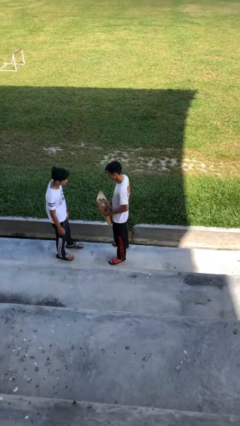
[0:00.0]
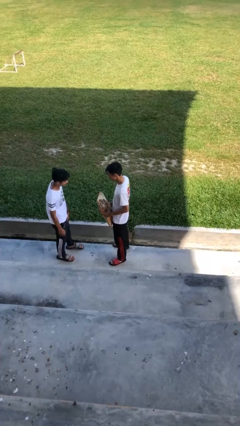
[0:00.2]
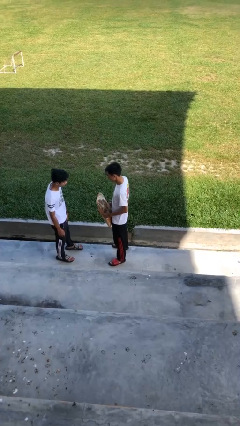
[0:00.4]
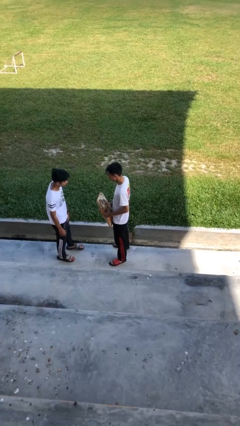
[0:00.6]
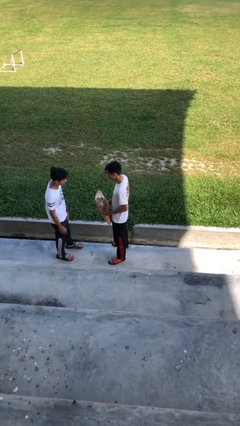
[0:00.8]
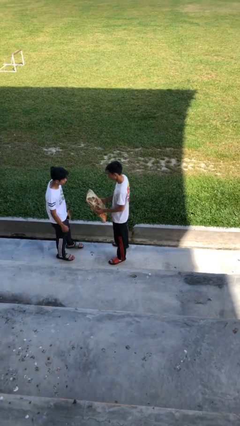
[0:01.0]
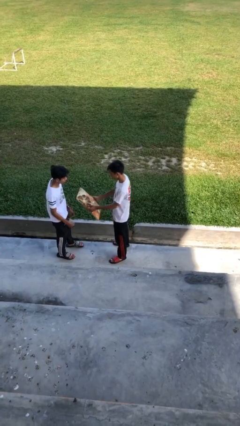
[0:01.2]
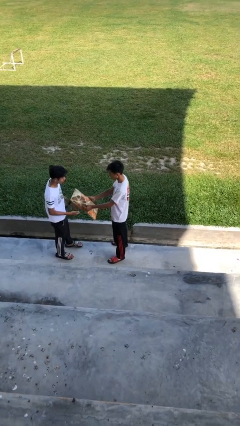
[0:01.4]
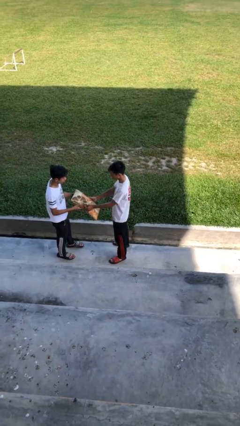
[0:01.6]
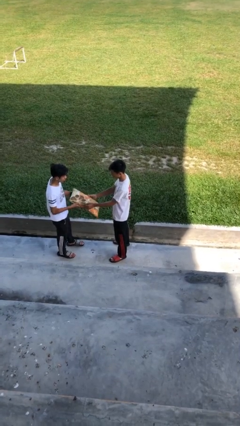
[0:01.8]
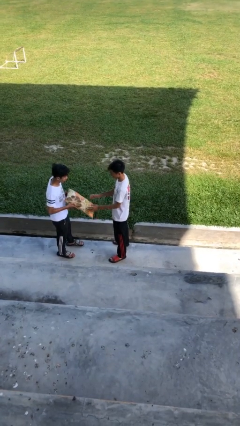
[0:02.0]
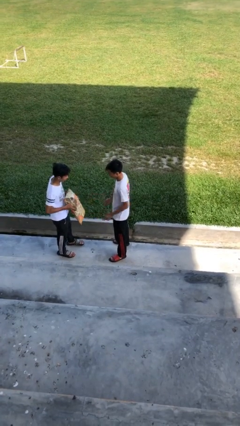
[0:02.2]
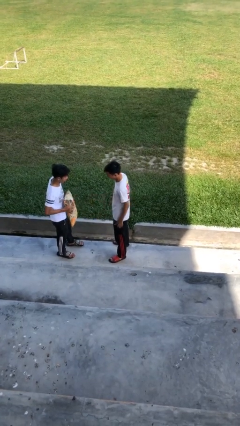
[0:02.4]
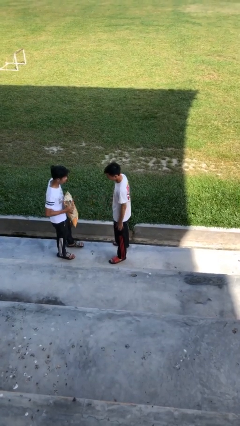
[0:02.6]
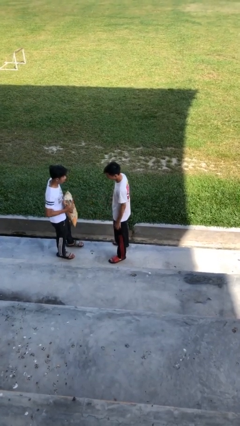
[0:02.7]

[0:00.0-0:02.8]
person transfers object to person

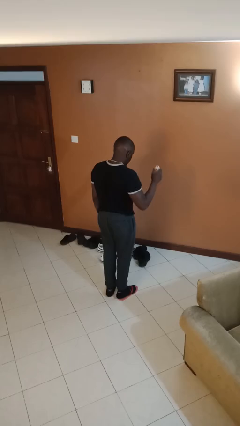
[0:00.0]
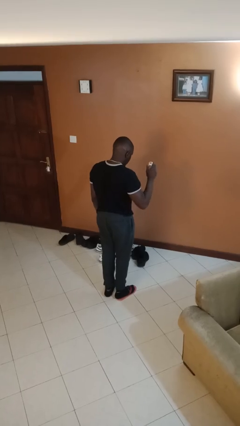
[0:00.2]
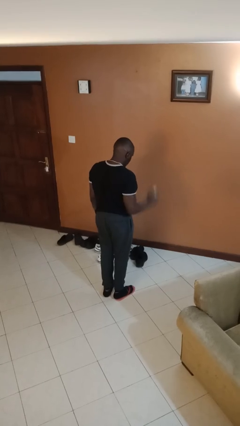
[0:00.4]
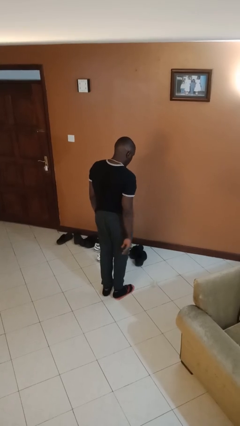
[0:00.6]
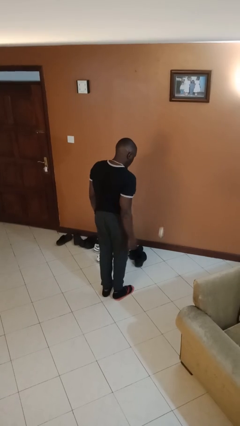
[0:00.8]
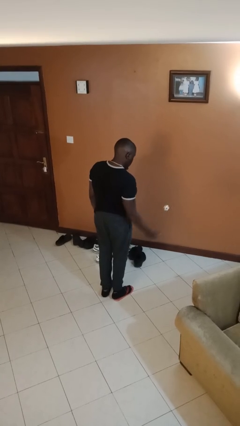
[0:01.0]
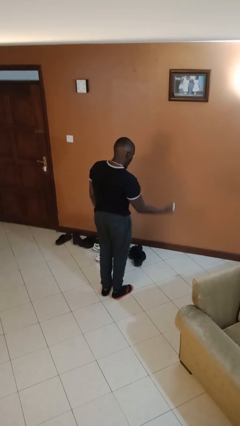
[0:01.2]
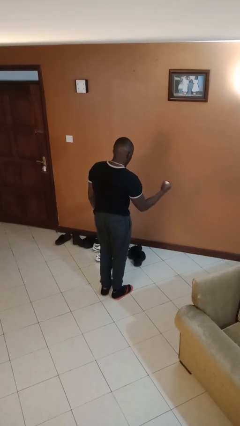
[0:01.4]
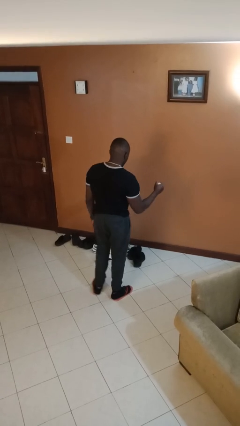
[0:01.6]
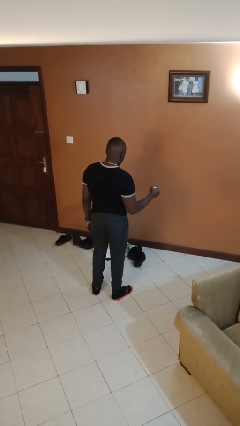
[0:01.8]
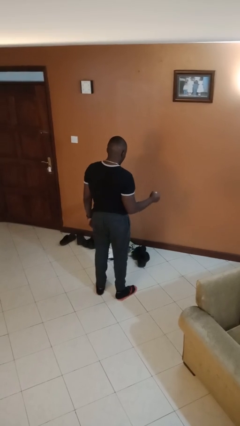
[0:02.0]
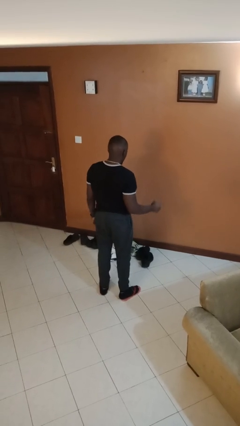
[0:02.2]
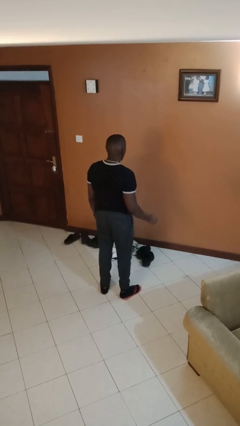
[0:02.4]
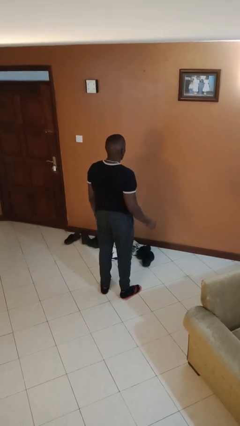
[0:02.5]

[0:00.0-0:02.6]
person bounces ball on floor

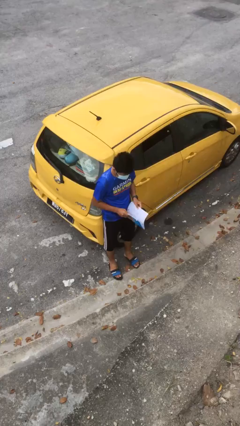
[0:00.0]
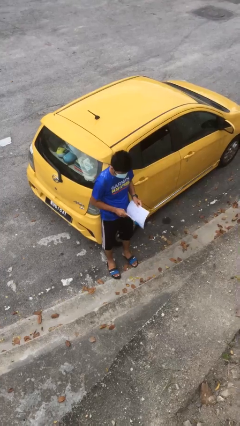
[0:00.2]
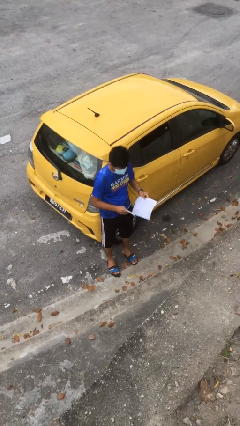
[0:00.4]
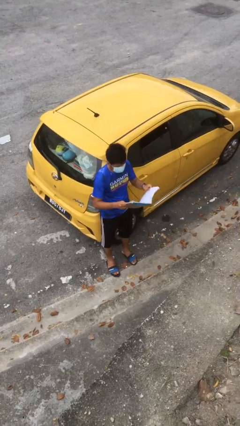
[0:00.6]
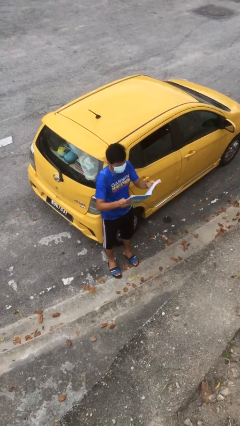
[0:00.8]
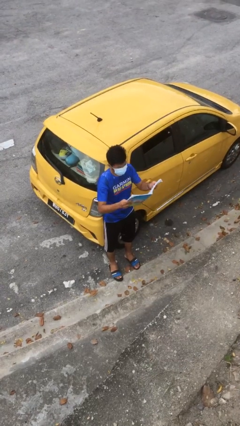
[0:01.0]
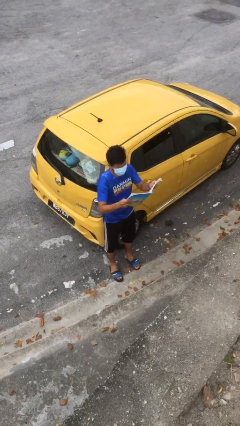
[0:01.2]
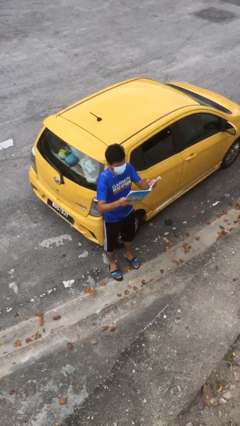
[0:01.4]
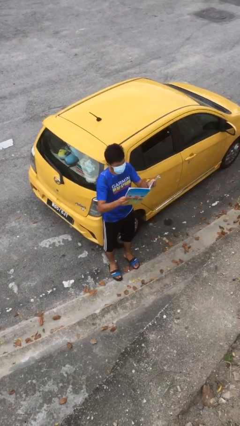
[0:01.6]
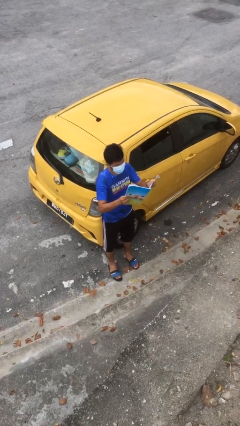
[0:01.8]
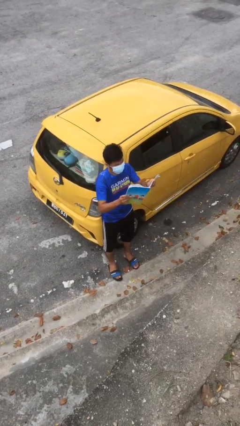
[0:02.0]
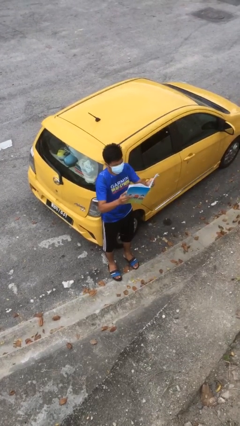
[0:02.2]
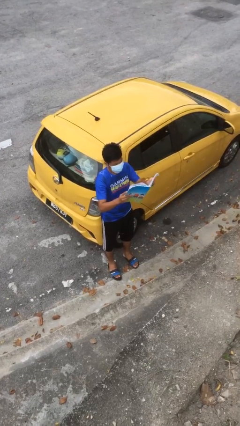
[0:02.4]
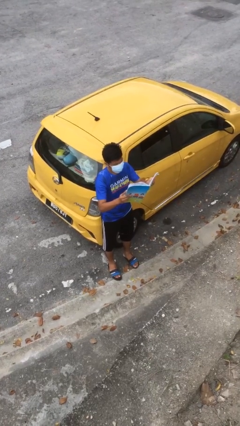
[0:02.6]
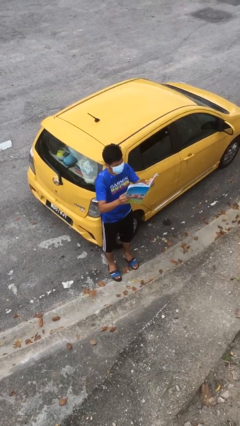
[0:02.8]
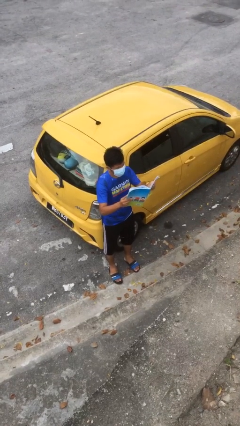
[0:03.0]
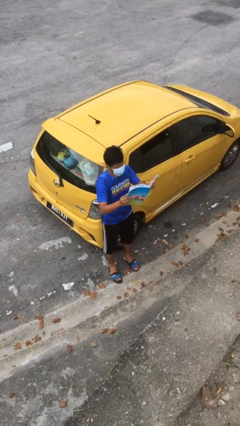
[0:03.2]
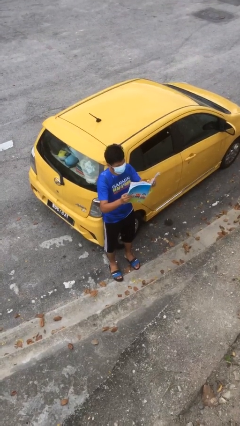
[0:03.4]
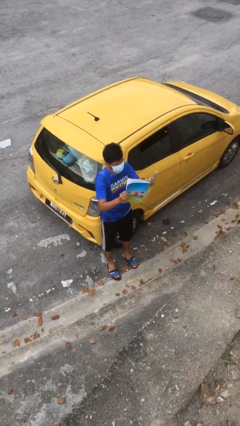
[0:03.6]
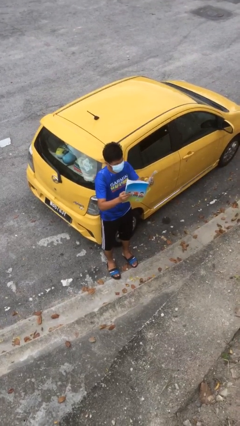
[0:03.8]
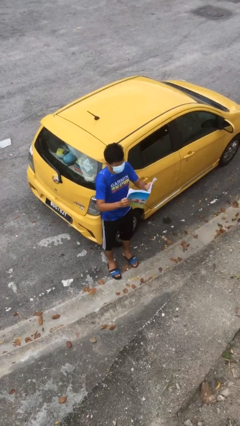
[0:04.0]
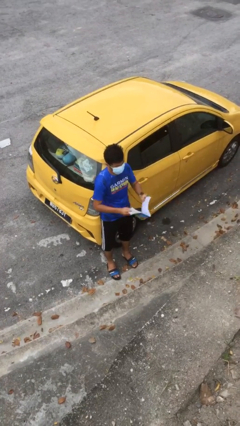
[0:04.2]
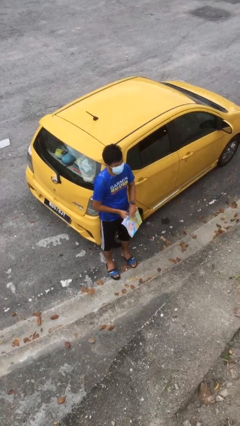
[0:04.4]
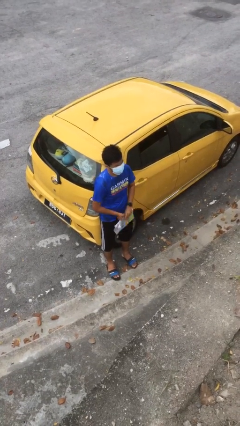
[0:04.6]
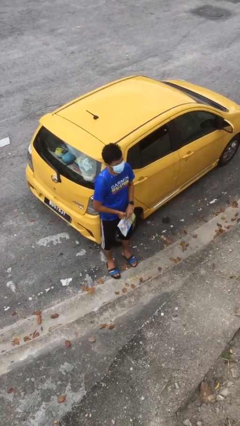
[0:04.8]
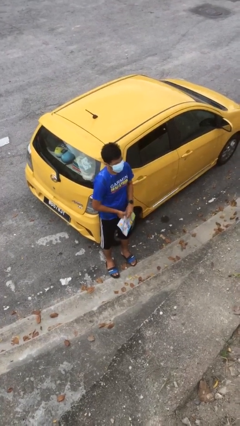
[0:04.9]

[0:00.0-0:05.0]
person reads document

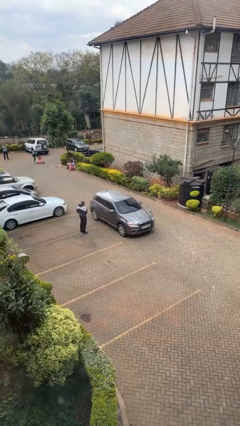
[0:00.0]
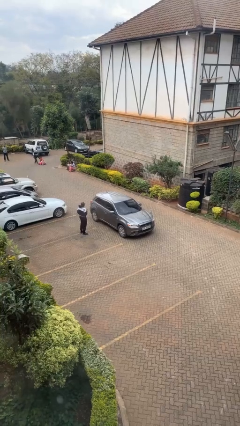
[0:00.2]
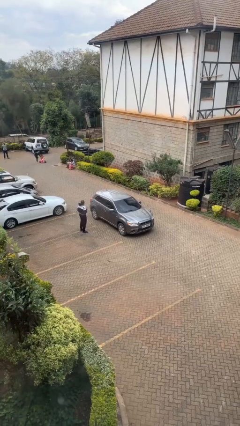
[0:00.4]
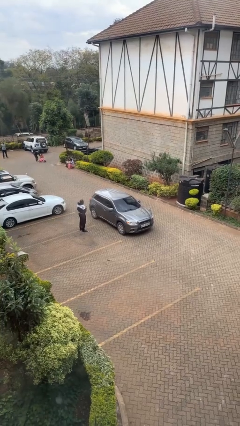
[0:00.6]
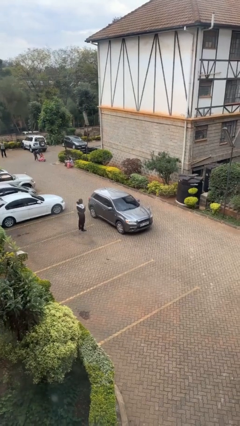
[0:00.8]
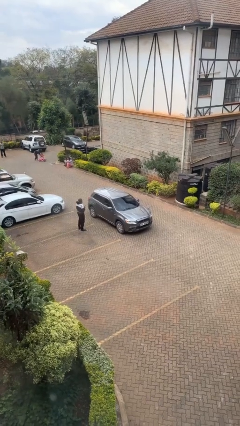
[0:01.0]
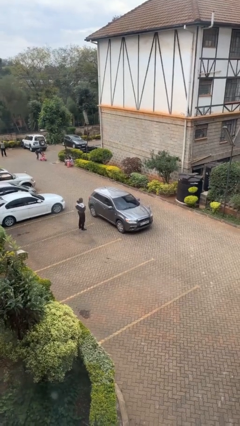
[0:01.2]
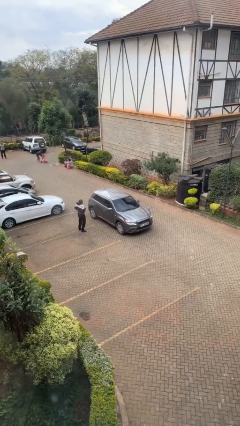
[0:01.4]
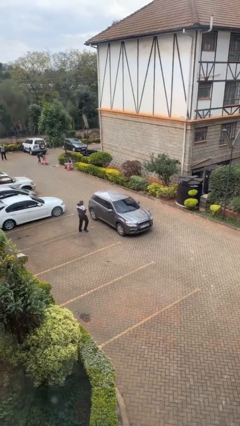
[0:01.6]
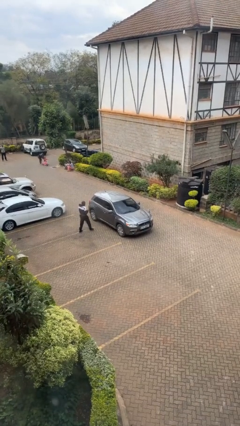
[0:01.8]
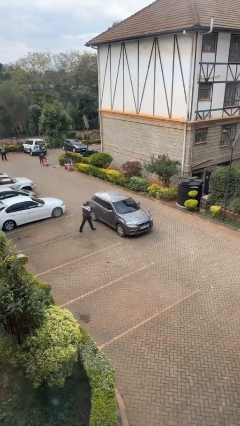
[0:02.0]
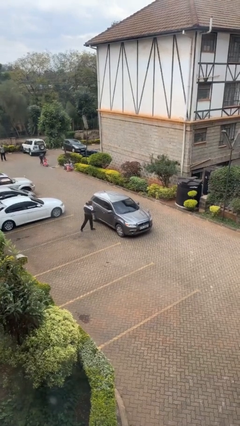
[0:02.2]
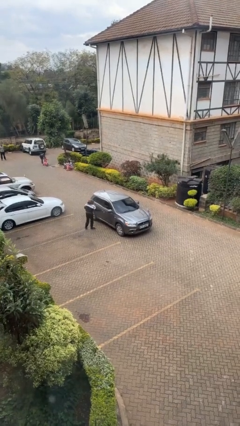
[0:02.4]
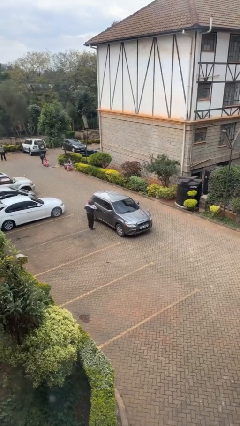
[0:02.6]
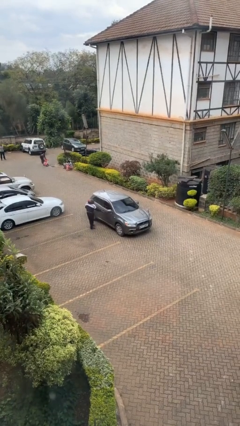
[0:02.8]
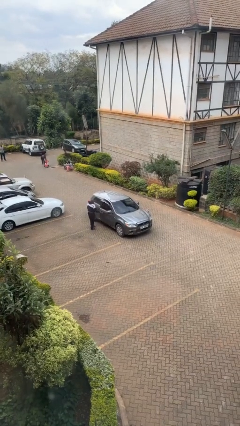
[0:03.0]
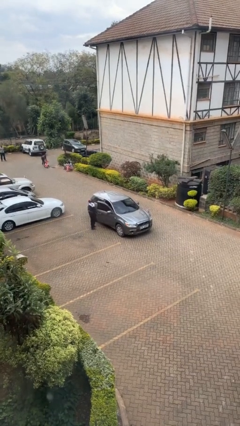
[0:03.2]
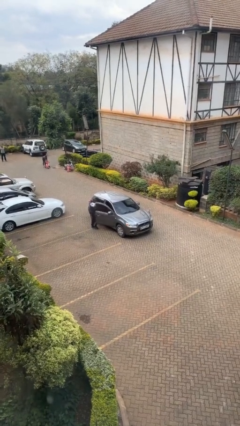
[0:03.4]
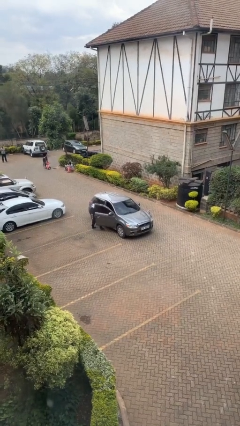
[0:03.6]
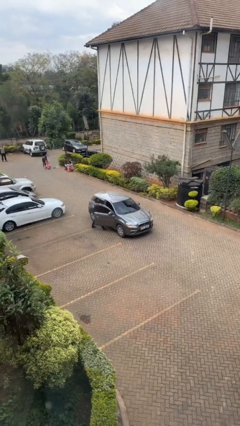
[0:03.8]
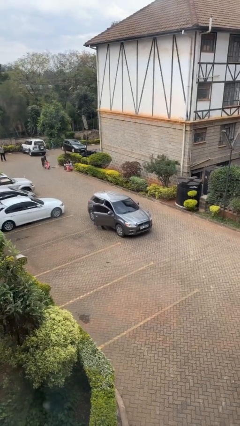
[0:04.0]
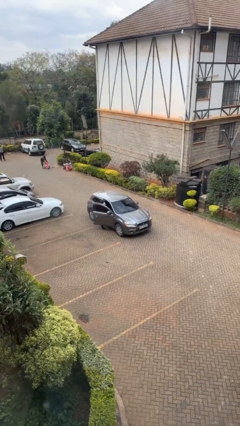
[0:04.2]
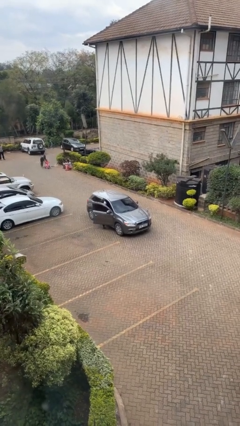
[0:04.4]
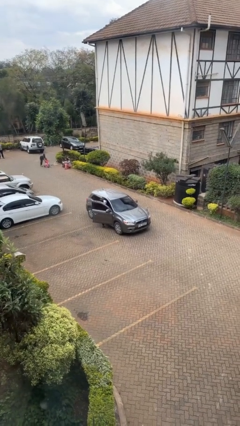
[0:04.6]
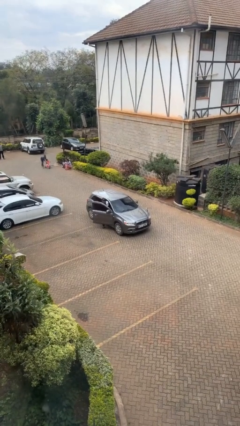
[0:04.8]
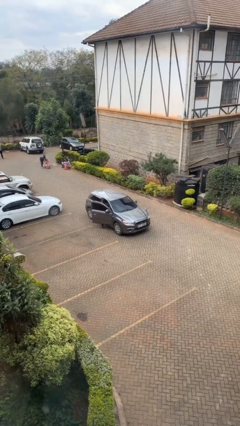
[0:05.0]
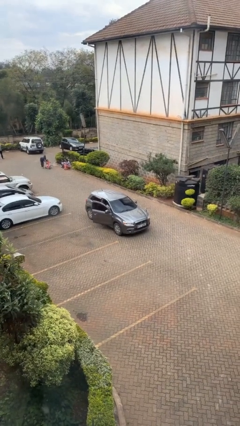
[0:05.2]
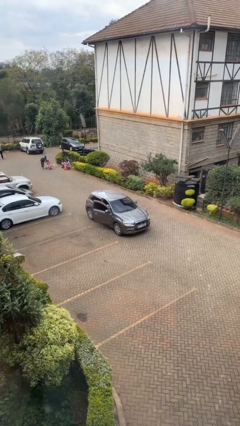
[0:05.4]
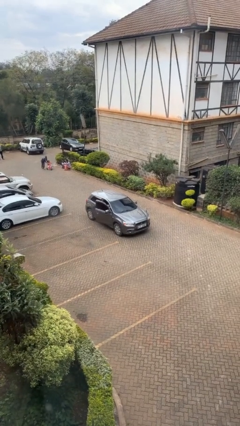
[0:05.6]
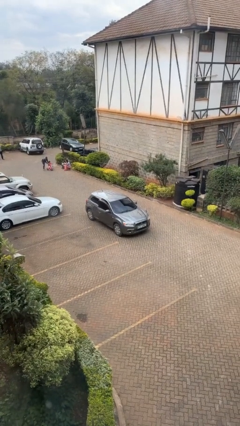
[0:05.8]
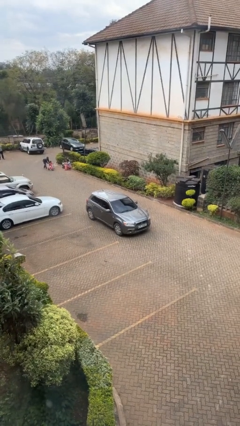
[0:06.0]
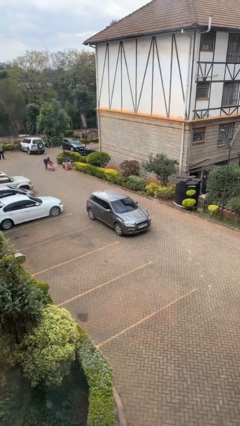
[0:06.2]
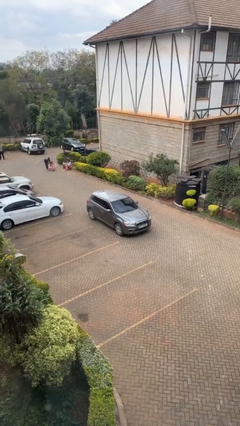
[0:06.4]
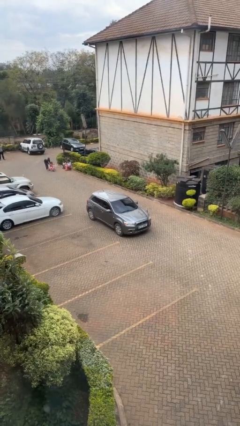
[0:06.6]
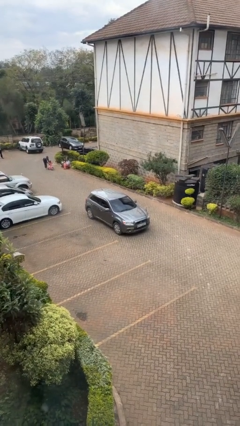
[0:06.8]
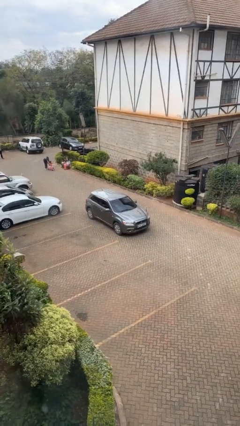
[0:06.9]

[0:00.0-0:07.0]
car picks up person

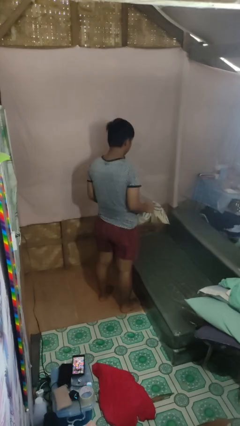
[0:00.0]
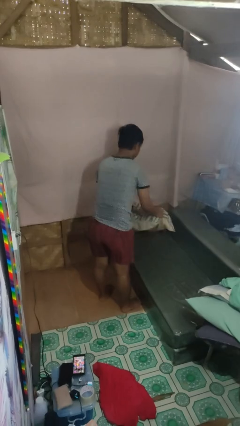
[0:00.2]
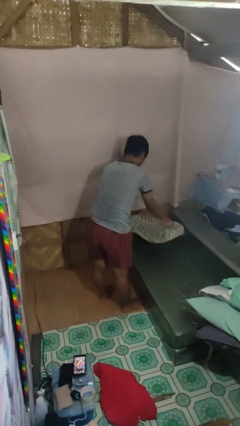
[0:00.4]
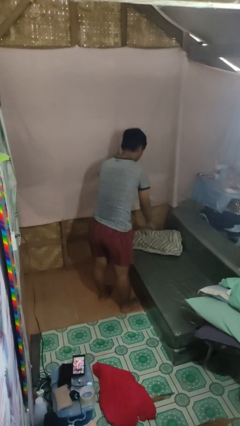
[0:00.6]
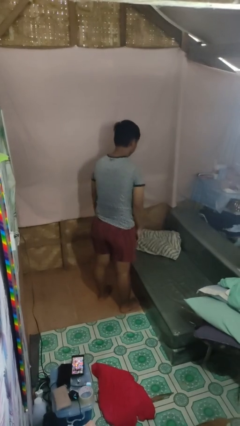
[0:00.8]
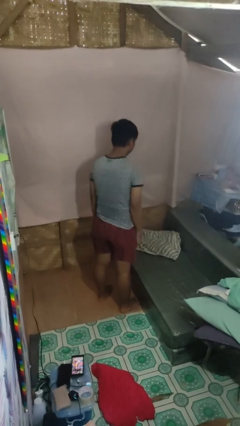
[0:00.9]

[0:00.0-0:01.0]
person puts down object on couch
